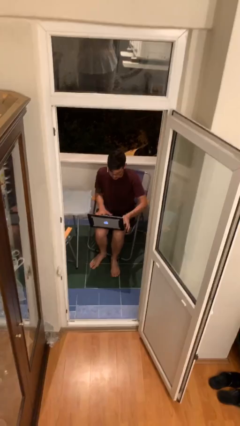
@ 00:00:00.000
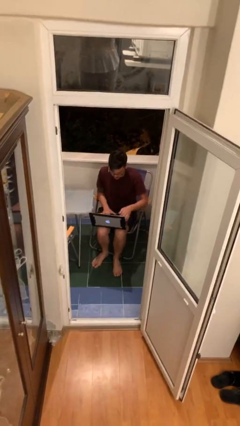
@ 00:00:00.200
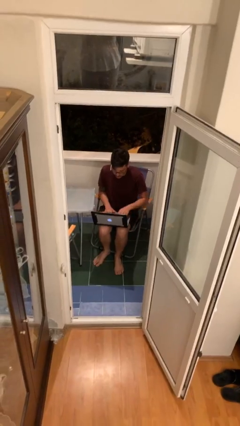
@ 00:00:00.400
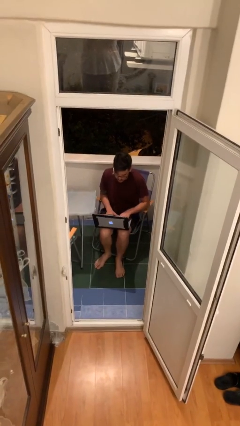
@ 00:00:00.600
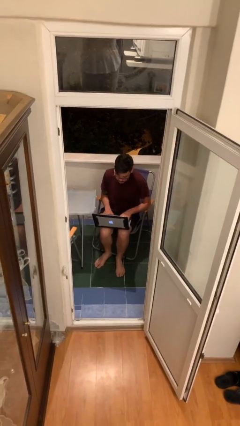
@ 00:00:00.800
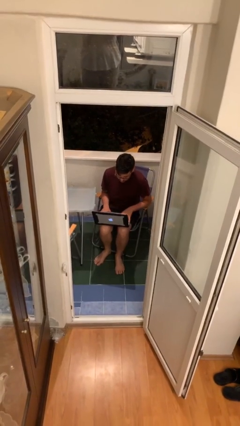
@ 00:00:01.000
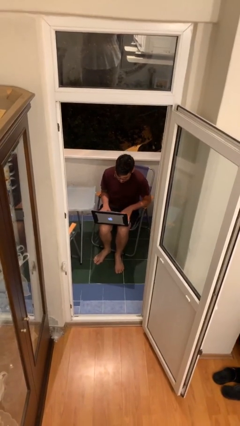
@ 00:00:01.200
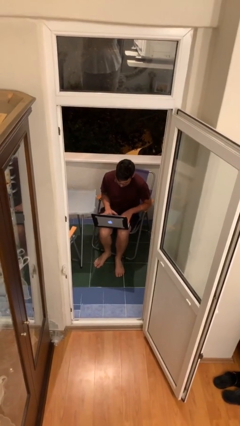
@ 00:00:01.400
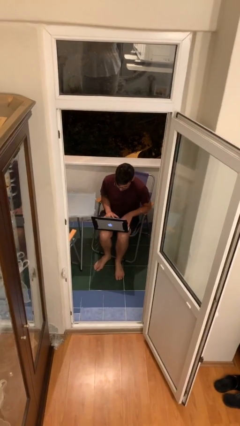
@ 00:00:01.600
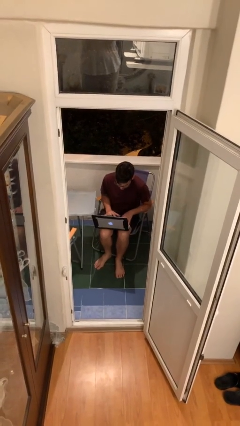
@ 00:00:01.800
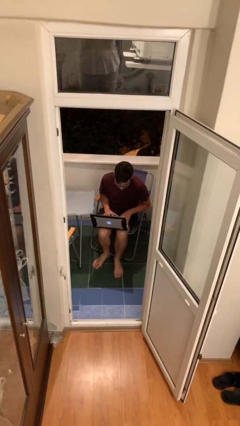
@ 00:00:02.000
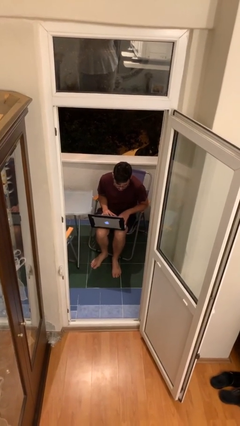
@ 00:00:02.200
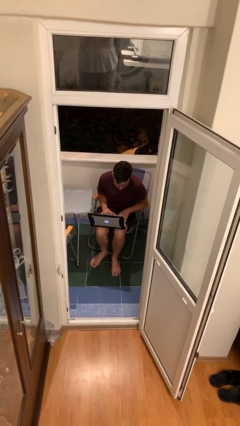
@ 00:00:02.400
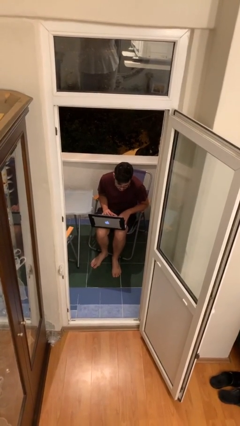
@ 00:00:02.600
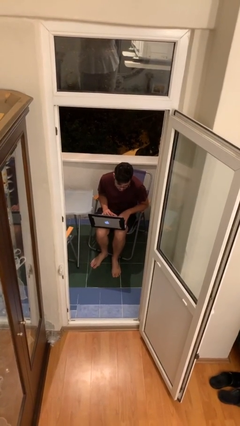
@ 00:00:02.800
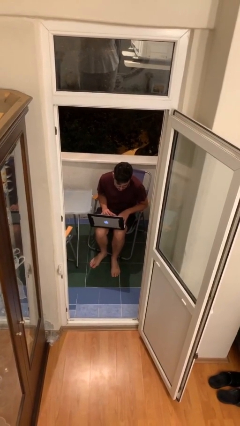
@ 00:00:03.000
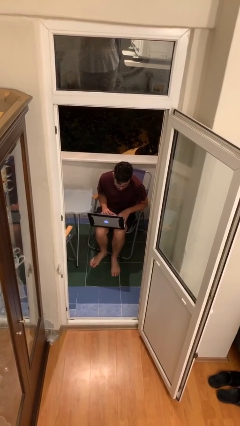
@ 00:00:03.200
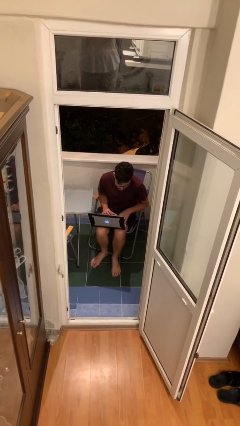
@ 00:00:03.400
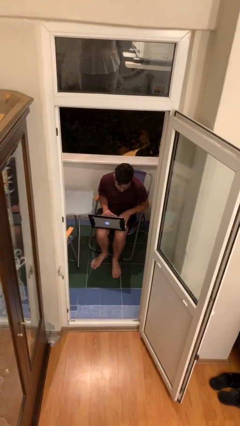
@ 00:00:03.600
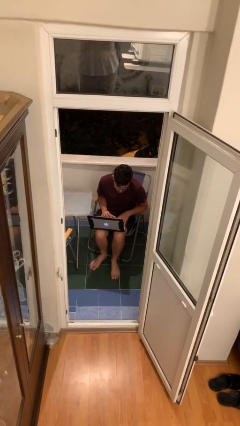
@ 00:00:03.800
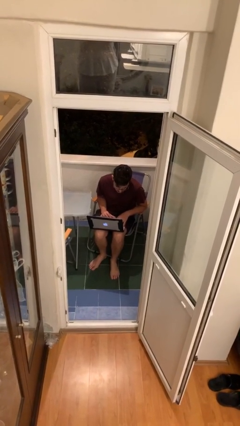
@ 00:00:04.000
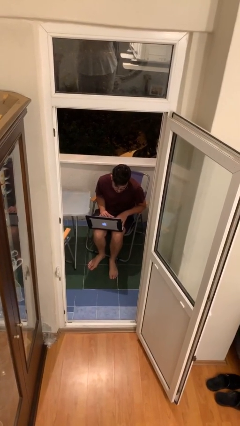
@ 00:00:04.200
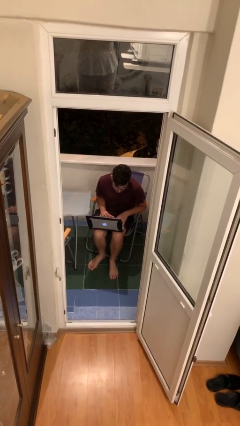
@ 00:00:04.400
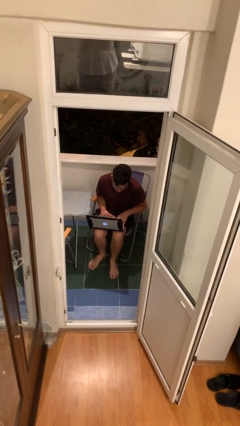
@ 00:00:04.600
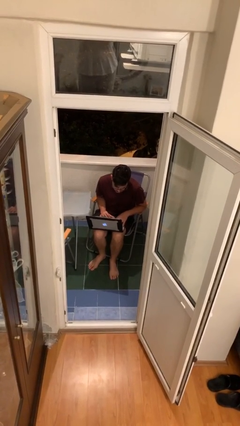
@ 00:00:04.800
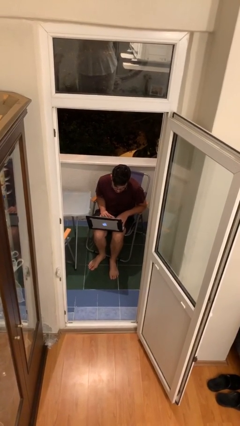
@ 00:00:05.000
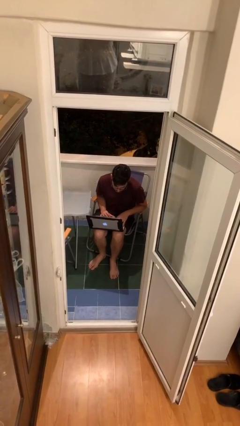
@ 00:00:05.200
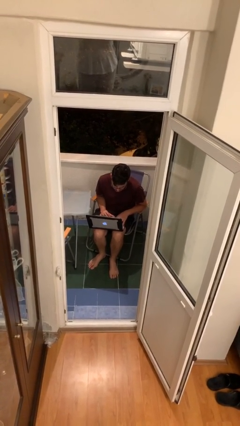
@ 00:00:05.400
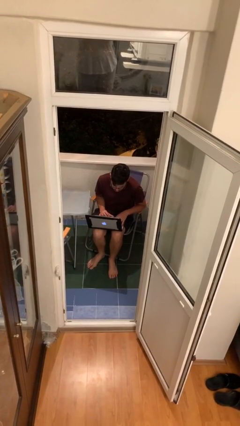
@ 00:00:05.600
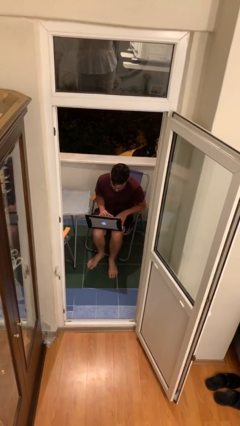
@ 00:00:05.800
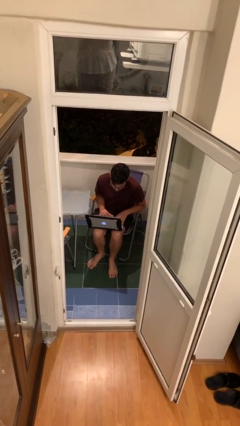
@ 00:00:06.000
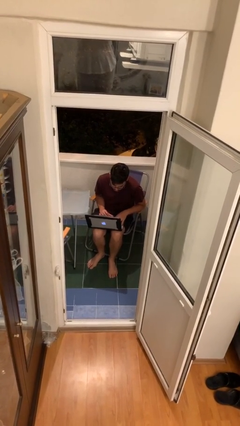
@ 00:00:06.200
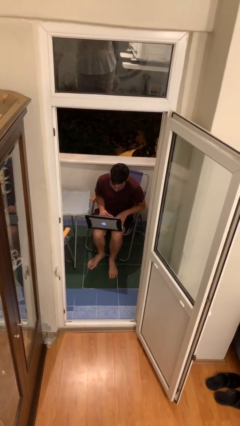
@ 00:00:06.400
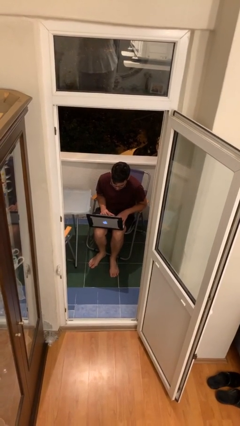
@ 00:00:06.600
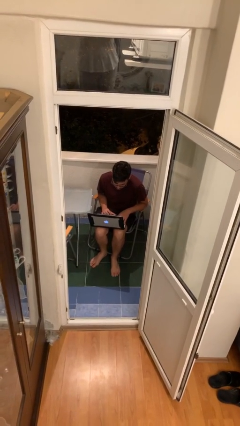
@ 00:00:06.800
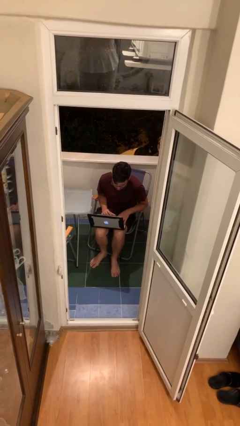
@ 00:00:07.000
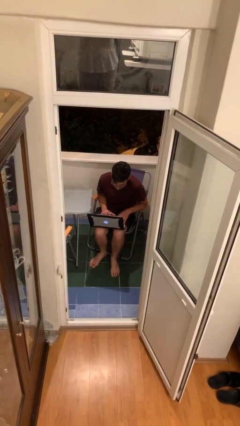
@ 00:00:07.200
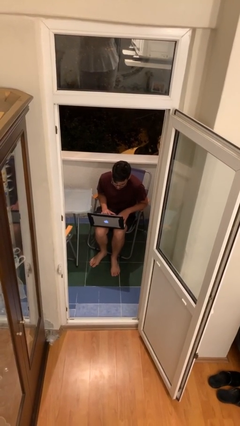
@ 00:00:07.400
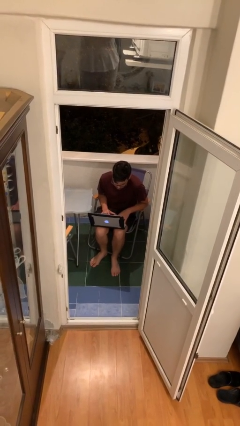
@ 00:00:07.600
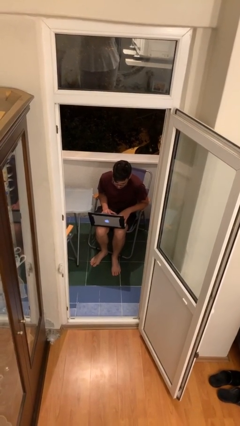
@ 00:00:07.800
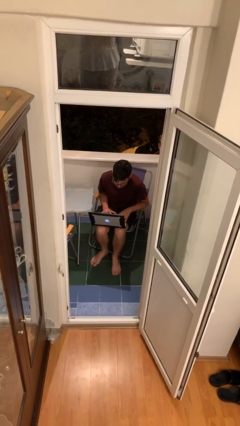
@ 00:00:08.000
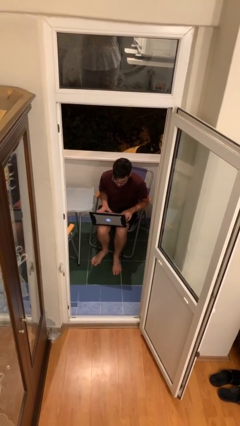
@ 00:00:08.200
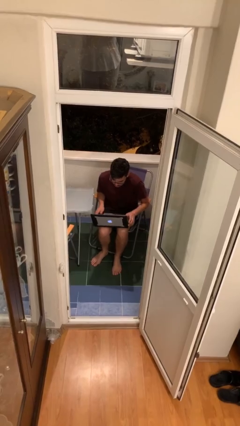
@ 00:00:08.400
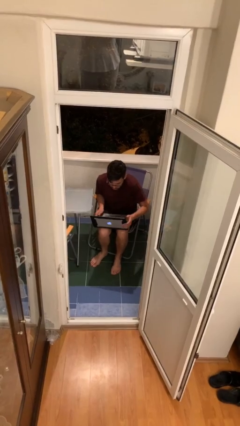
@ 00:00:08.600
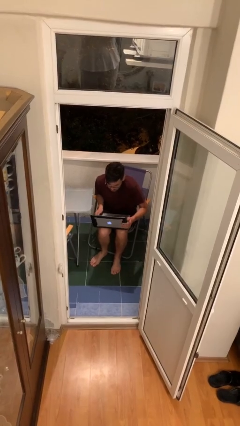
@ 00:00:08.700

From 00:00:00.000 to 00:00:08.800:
person interacts with laptop

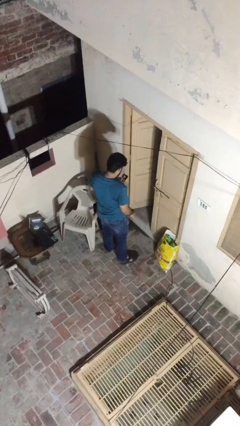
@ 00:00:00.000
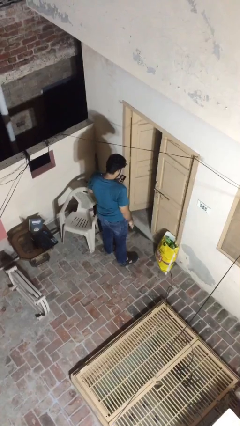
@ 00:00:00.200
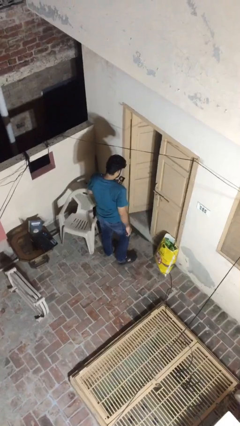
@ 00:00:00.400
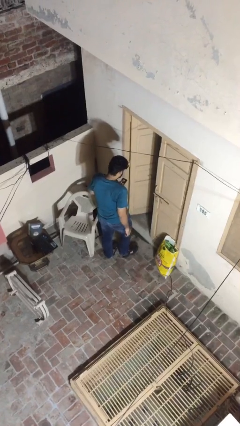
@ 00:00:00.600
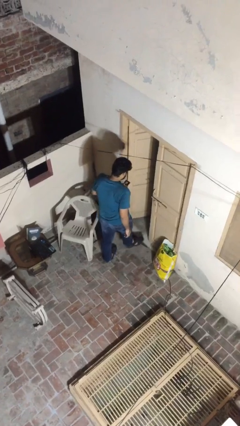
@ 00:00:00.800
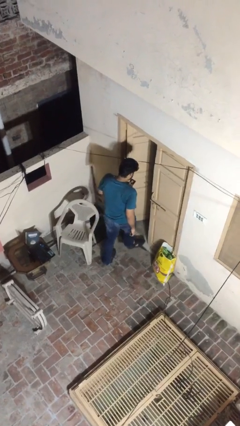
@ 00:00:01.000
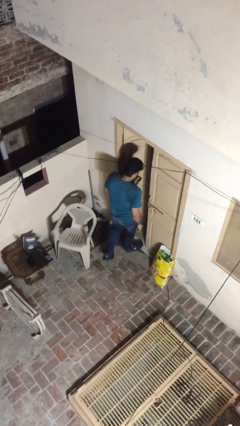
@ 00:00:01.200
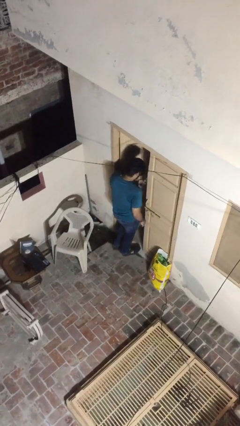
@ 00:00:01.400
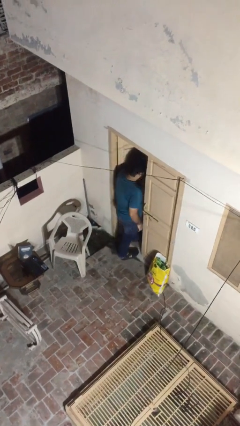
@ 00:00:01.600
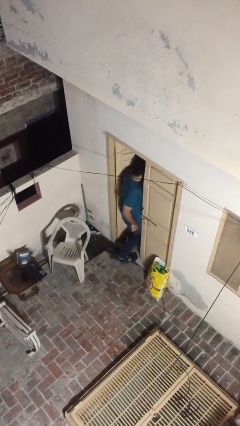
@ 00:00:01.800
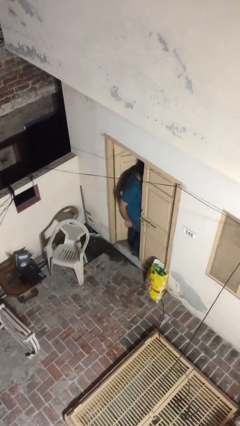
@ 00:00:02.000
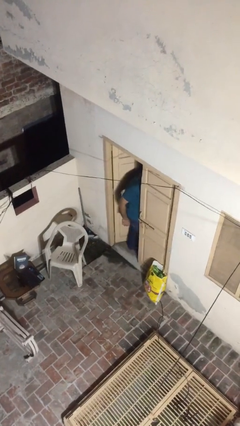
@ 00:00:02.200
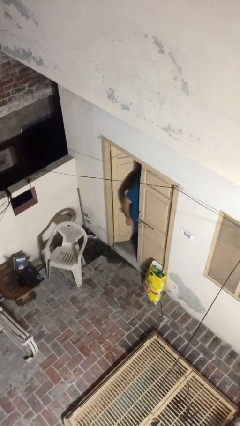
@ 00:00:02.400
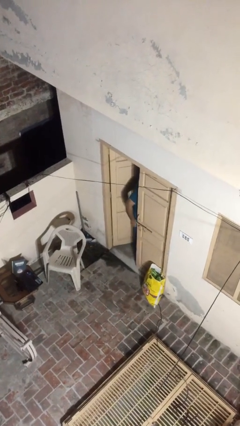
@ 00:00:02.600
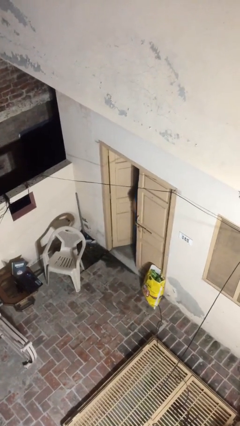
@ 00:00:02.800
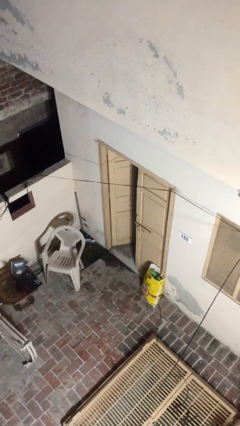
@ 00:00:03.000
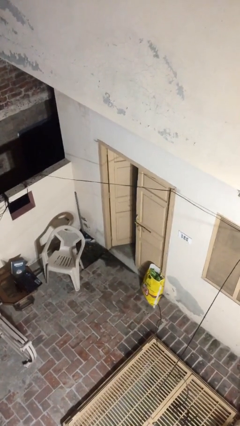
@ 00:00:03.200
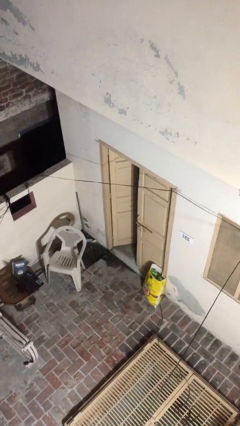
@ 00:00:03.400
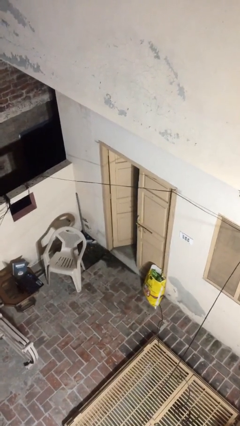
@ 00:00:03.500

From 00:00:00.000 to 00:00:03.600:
person exits scene through structure

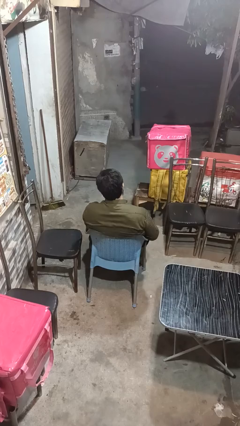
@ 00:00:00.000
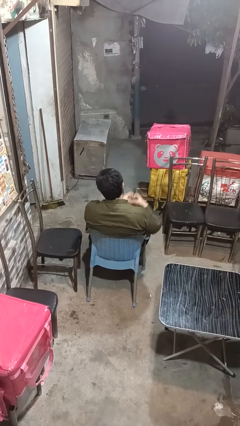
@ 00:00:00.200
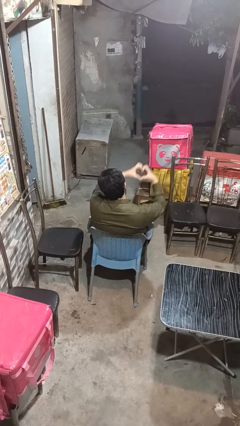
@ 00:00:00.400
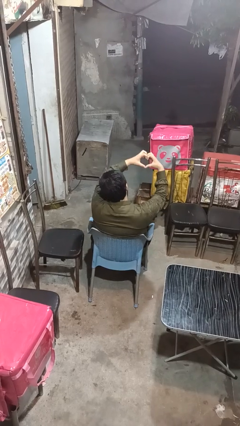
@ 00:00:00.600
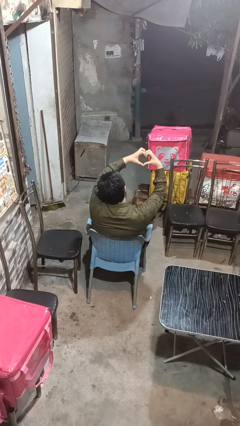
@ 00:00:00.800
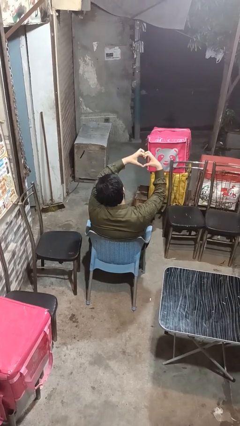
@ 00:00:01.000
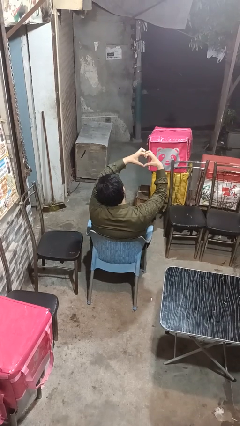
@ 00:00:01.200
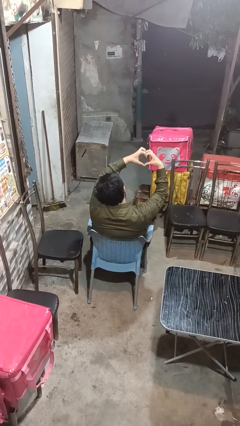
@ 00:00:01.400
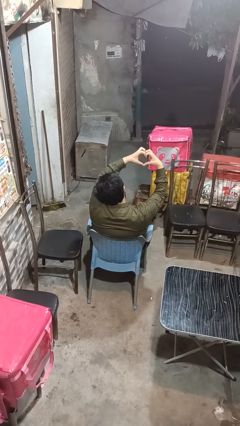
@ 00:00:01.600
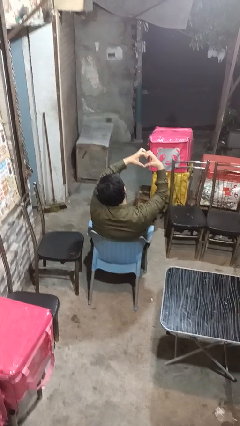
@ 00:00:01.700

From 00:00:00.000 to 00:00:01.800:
person gestures heart

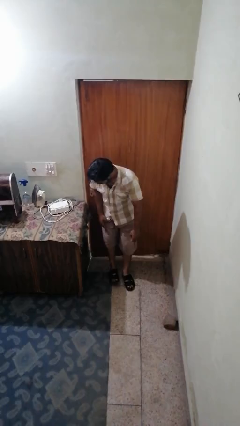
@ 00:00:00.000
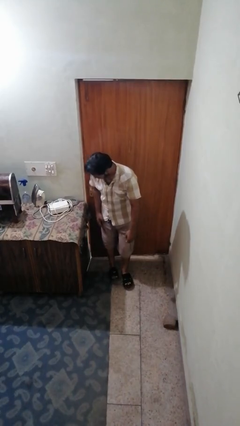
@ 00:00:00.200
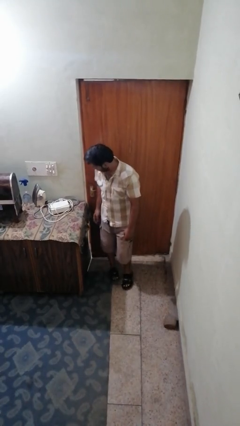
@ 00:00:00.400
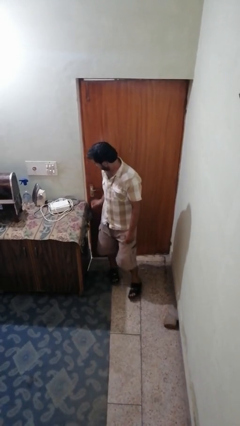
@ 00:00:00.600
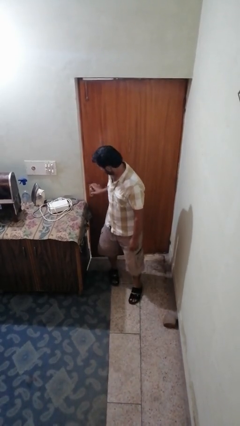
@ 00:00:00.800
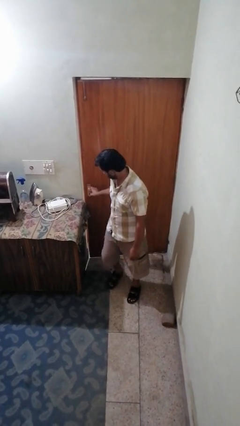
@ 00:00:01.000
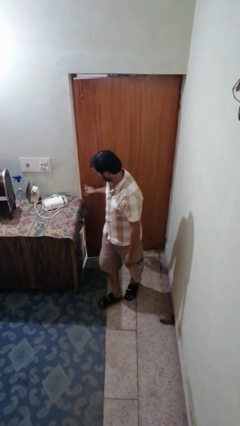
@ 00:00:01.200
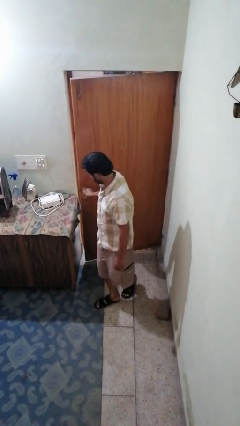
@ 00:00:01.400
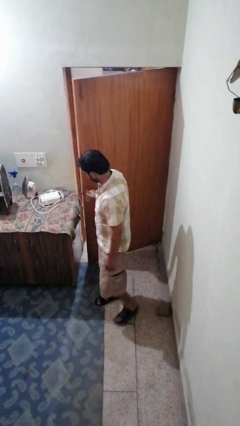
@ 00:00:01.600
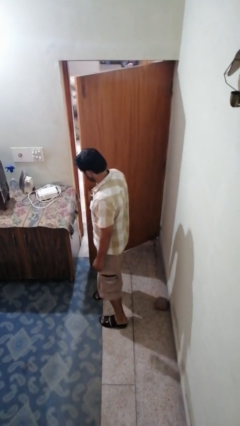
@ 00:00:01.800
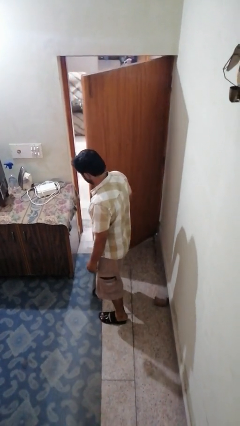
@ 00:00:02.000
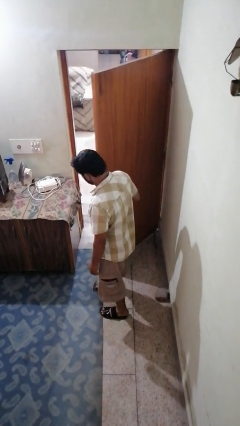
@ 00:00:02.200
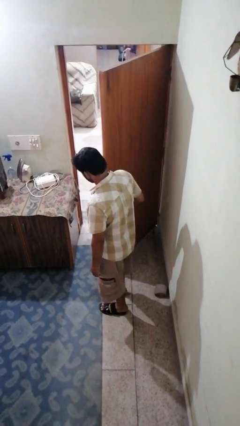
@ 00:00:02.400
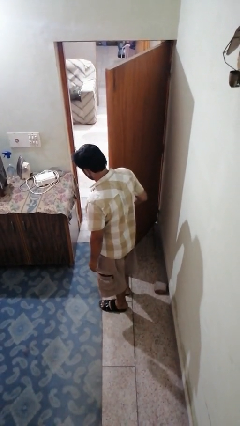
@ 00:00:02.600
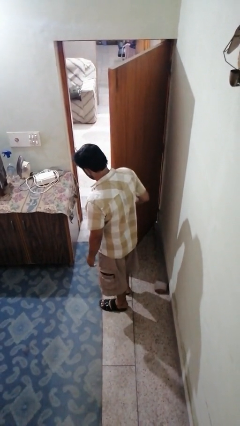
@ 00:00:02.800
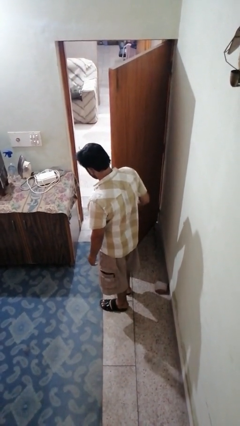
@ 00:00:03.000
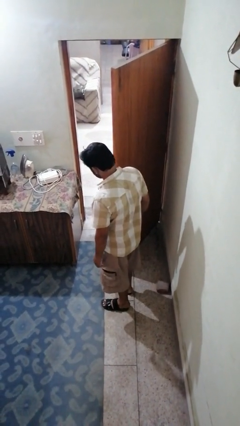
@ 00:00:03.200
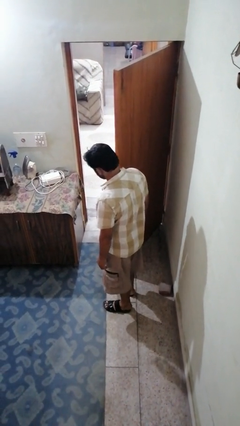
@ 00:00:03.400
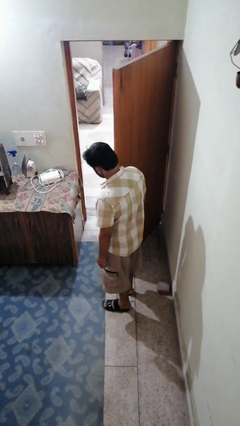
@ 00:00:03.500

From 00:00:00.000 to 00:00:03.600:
person opens facility door
